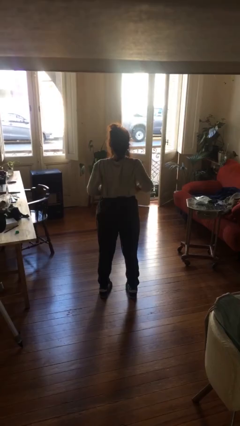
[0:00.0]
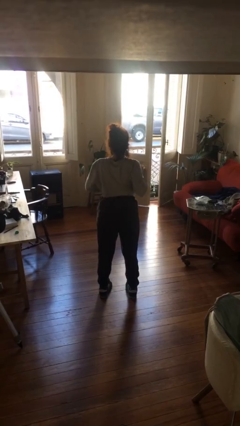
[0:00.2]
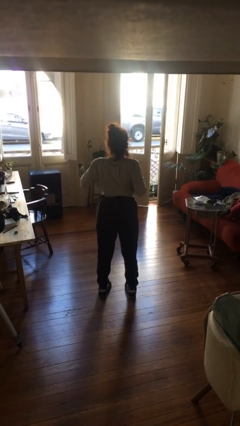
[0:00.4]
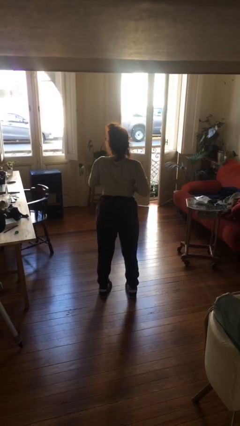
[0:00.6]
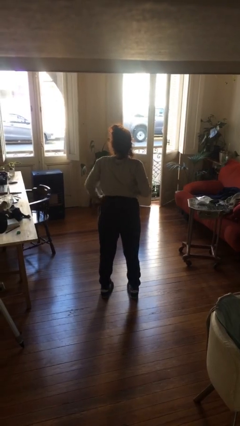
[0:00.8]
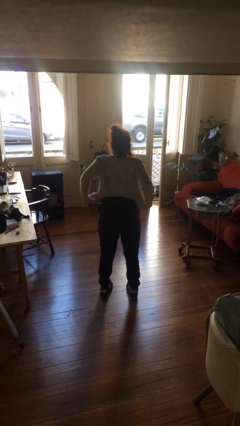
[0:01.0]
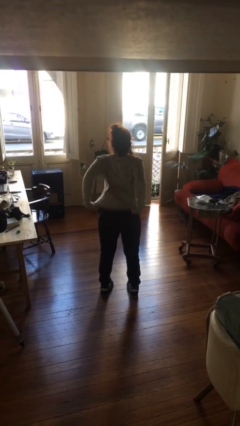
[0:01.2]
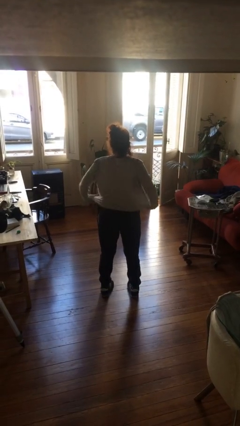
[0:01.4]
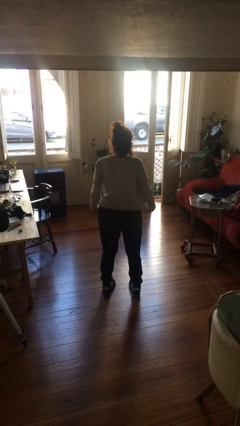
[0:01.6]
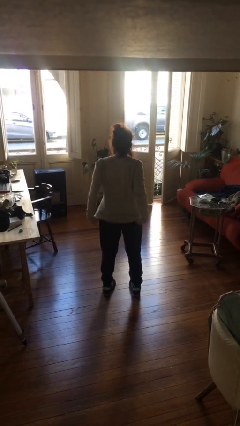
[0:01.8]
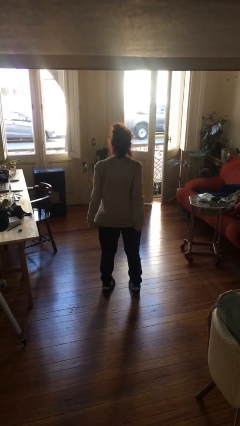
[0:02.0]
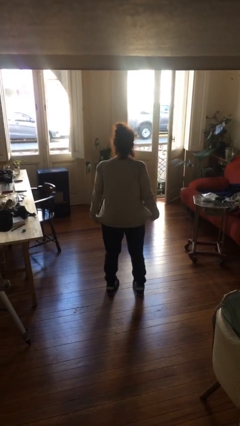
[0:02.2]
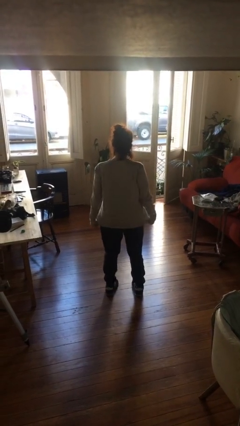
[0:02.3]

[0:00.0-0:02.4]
person untucks shirt

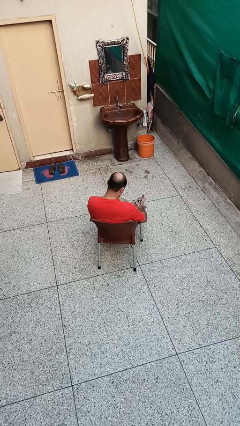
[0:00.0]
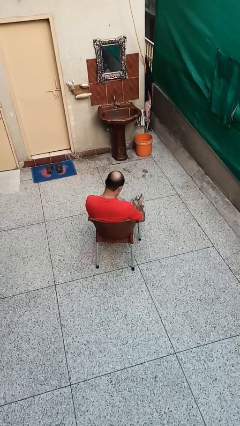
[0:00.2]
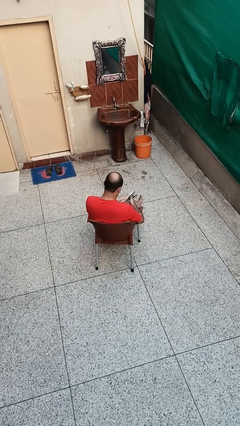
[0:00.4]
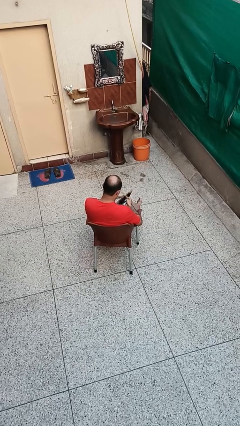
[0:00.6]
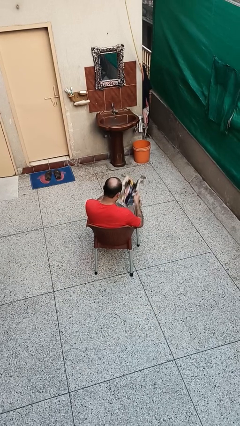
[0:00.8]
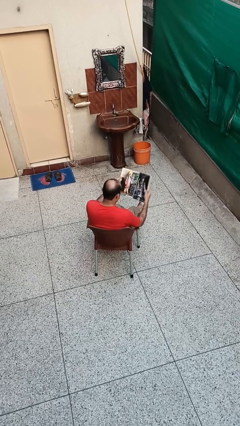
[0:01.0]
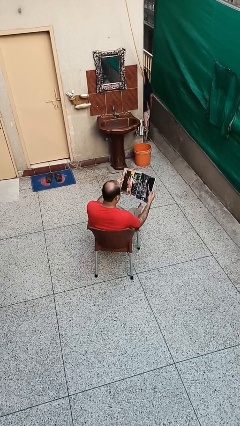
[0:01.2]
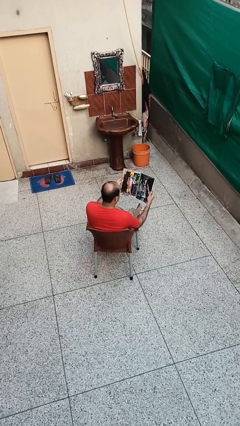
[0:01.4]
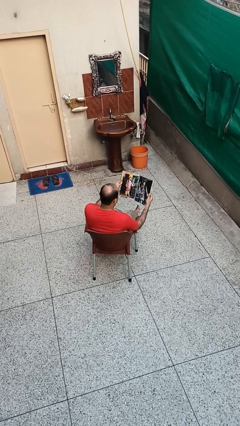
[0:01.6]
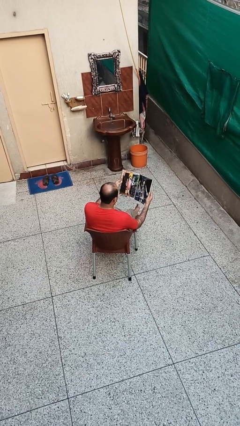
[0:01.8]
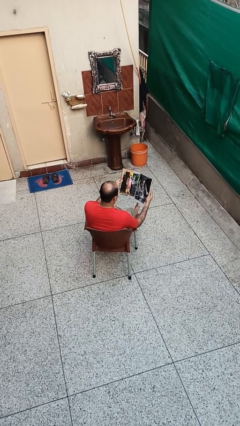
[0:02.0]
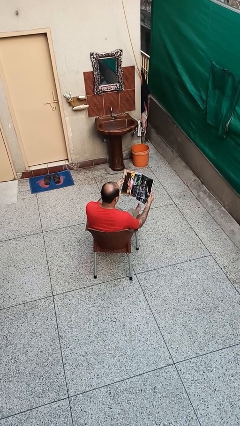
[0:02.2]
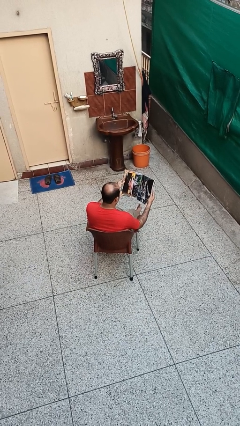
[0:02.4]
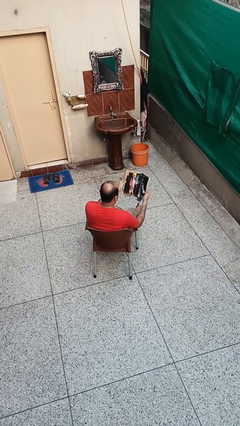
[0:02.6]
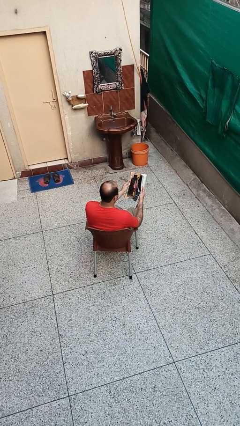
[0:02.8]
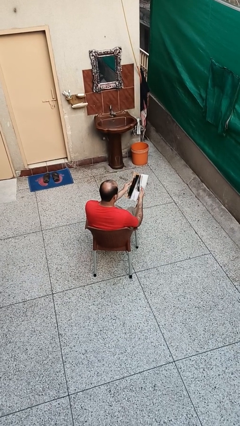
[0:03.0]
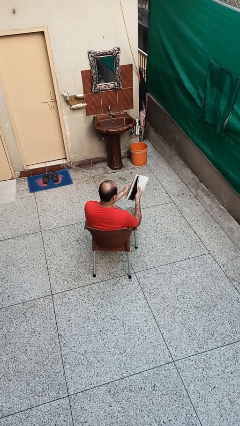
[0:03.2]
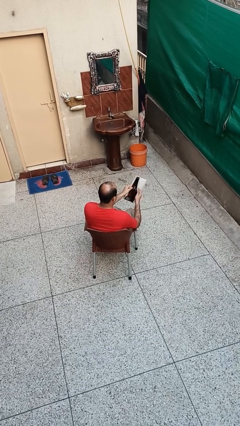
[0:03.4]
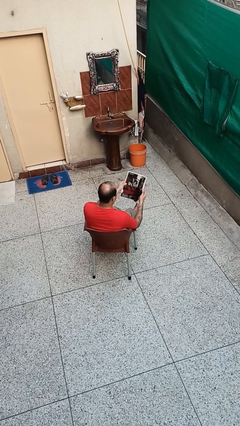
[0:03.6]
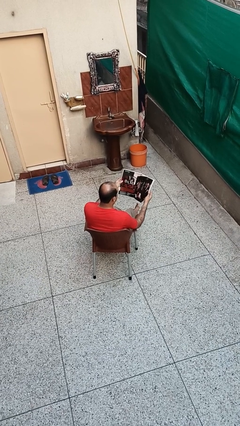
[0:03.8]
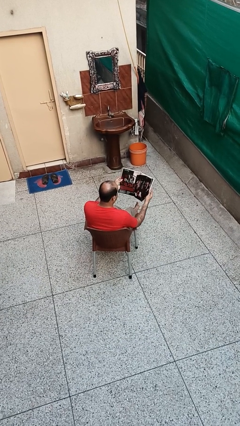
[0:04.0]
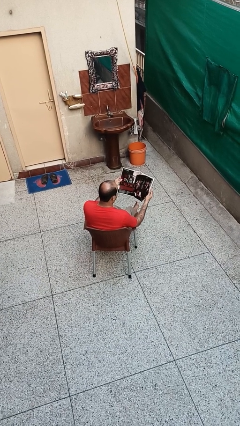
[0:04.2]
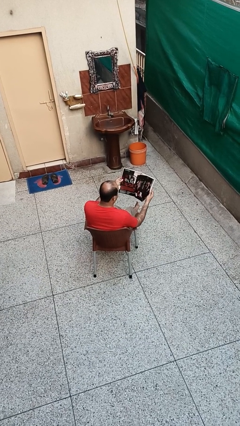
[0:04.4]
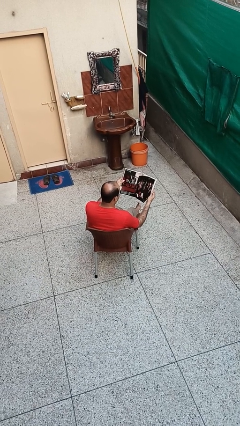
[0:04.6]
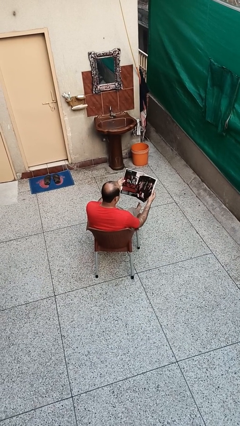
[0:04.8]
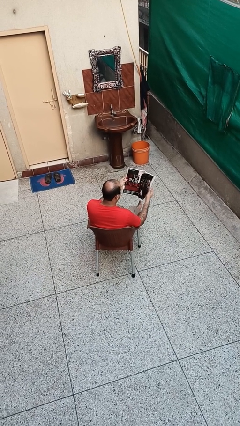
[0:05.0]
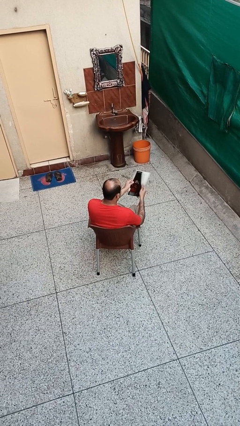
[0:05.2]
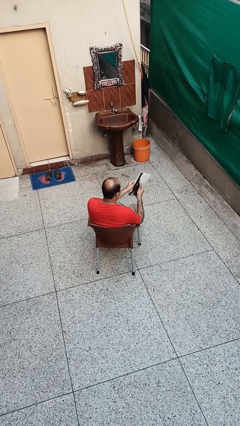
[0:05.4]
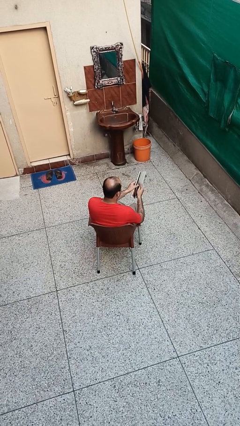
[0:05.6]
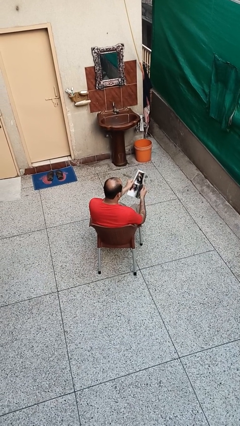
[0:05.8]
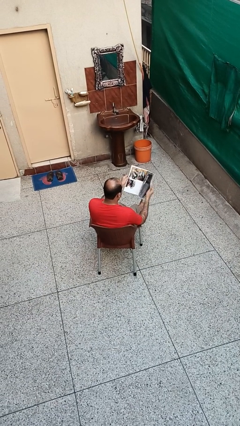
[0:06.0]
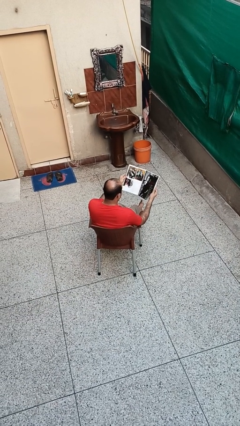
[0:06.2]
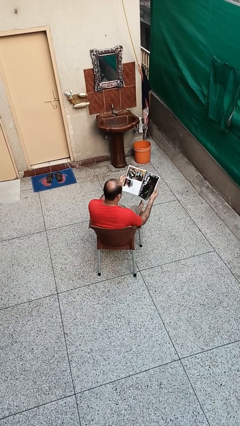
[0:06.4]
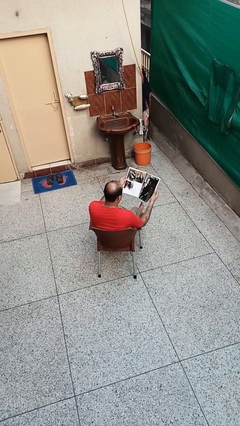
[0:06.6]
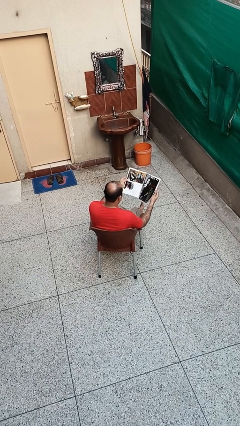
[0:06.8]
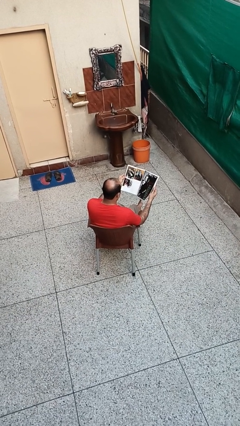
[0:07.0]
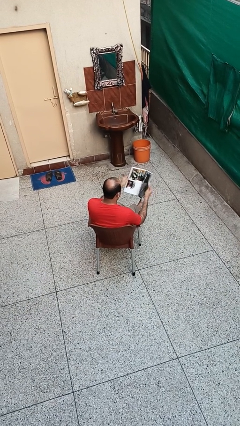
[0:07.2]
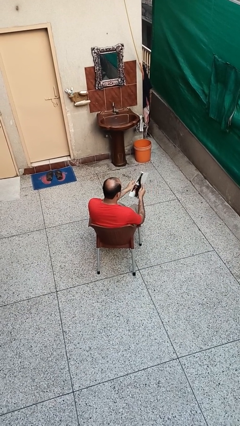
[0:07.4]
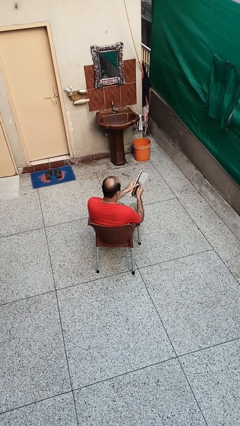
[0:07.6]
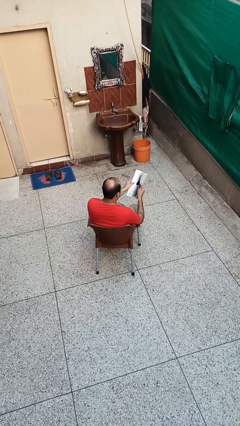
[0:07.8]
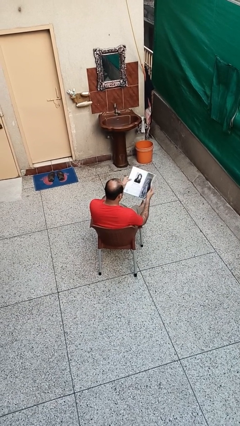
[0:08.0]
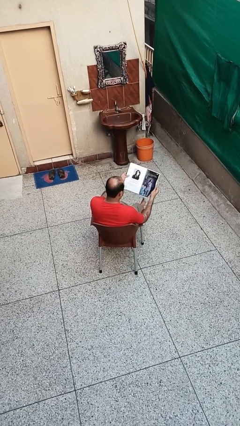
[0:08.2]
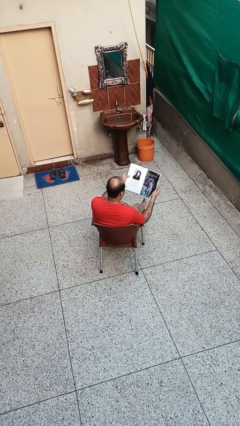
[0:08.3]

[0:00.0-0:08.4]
person reads magazine

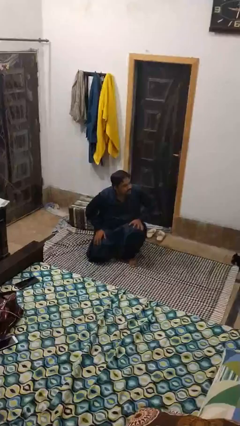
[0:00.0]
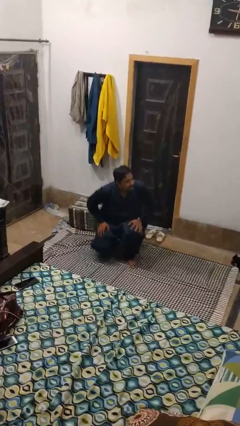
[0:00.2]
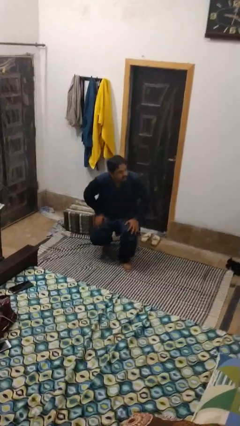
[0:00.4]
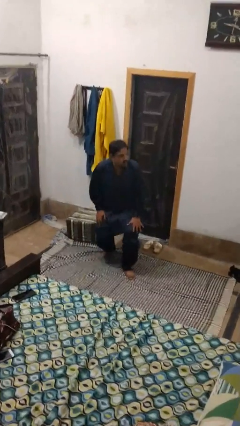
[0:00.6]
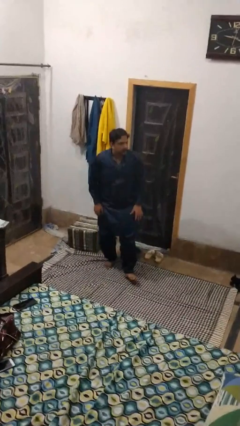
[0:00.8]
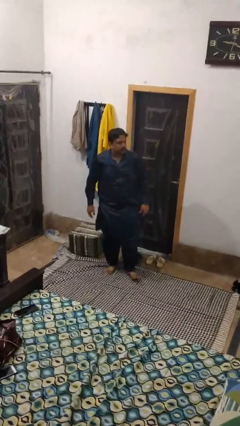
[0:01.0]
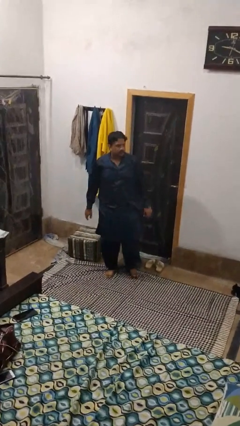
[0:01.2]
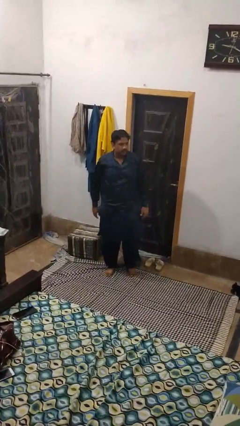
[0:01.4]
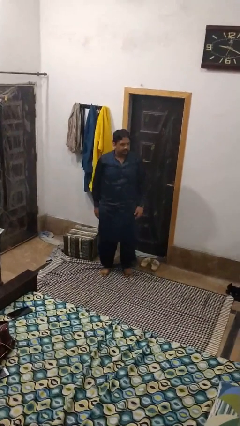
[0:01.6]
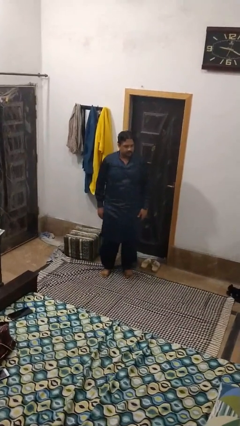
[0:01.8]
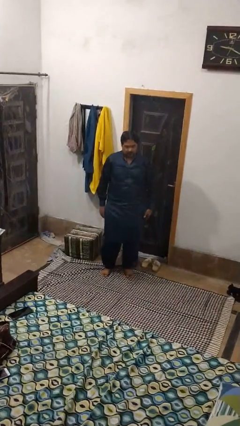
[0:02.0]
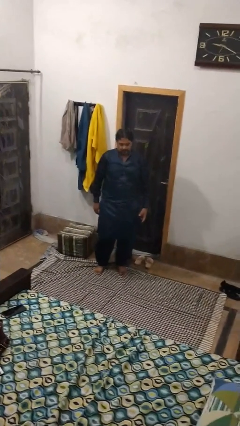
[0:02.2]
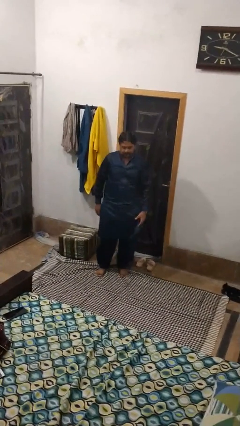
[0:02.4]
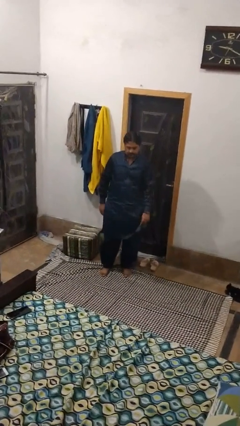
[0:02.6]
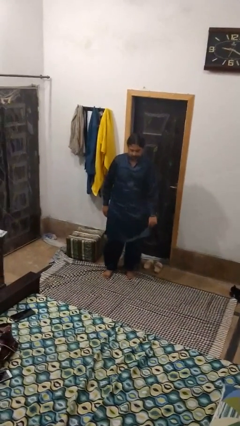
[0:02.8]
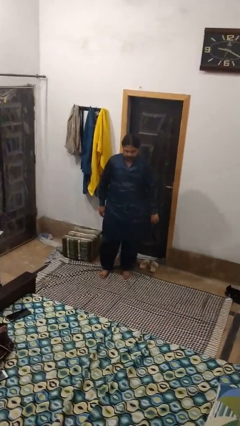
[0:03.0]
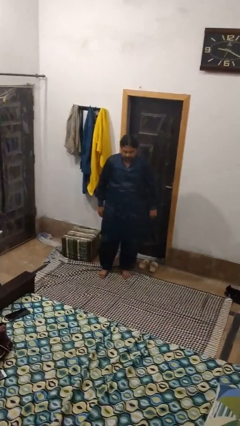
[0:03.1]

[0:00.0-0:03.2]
person stands up from floor

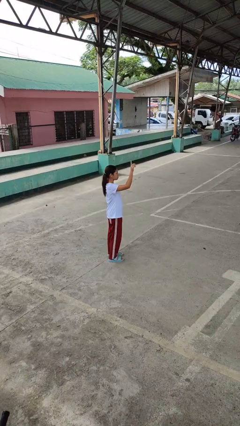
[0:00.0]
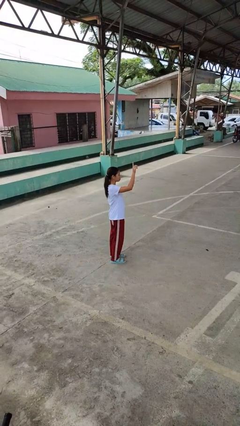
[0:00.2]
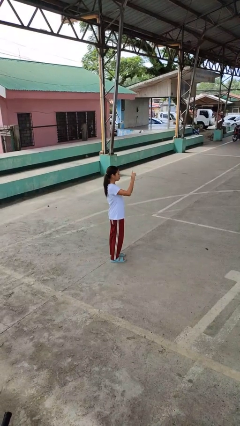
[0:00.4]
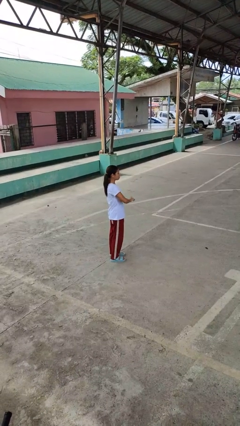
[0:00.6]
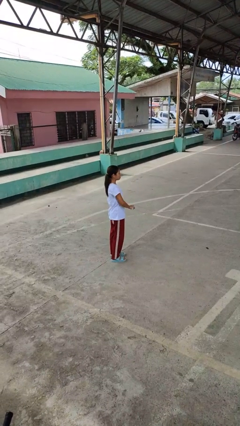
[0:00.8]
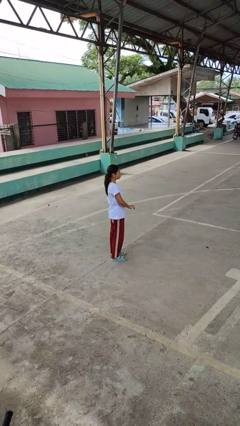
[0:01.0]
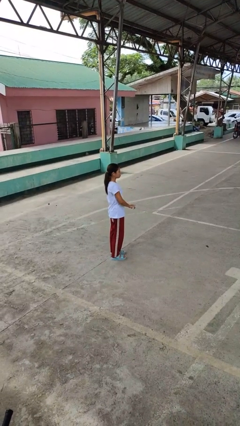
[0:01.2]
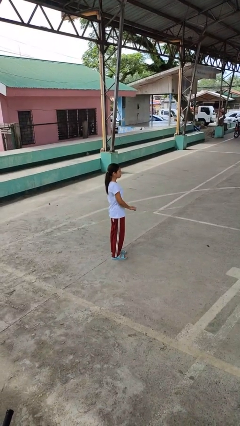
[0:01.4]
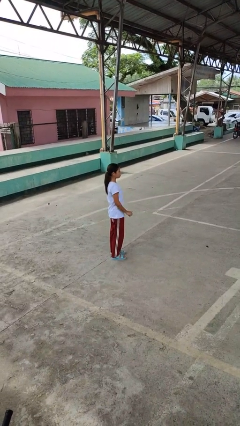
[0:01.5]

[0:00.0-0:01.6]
person gestures swipe down

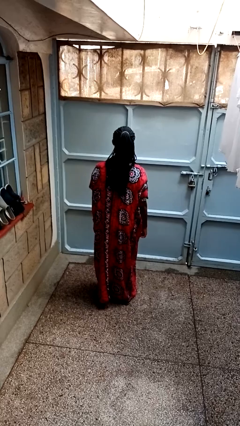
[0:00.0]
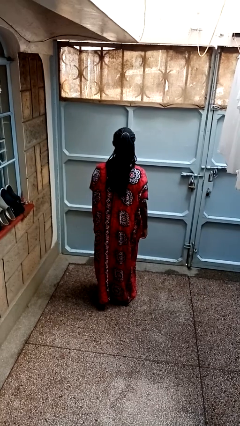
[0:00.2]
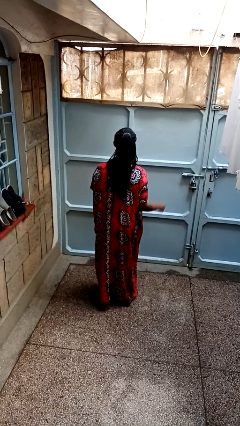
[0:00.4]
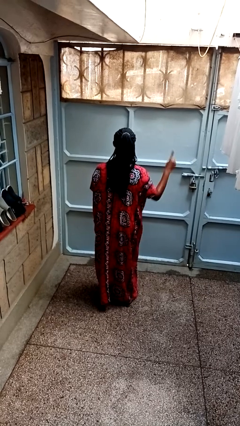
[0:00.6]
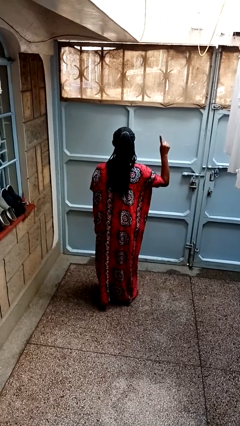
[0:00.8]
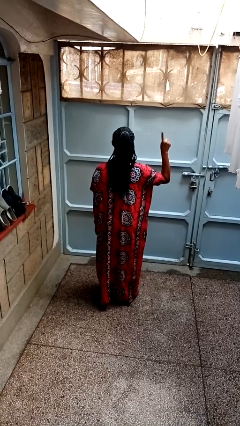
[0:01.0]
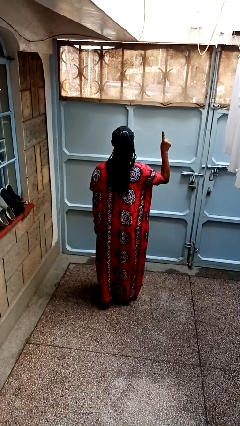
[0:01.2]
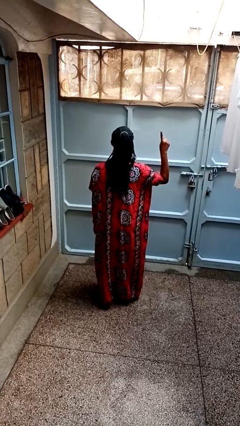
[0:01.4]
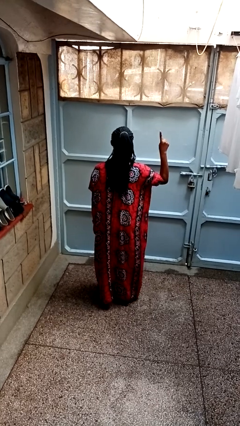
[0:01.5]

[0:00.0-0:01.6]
person gestures number one
